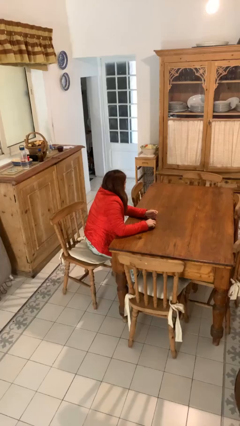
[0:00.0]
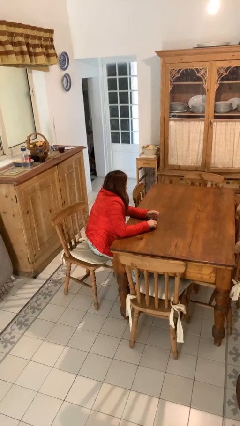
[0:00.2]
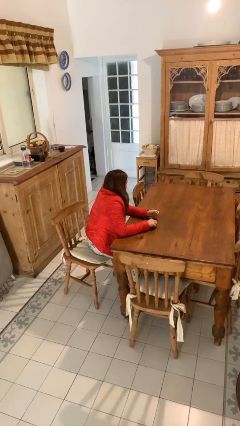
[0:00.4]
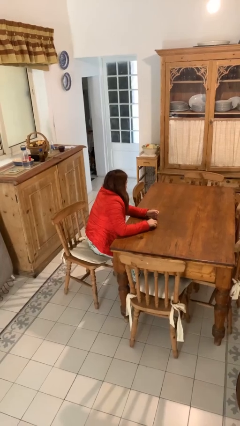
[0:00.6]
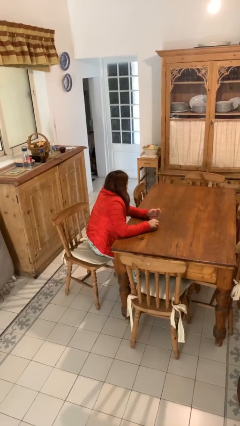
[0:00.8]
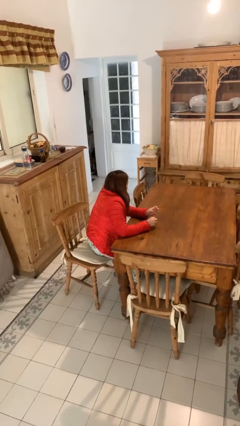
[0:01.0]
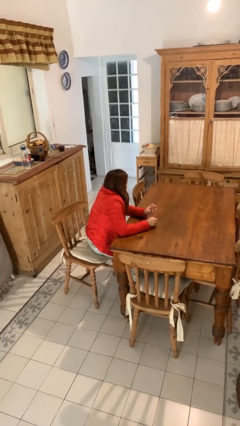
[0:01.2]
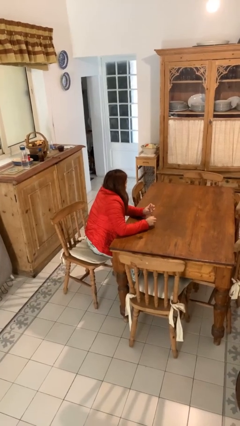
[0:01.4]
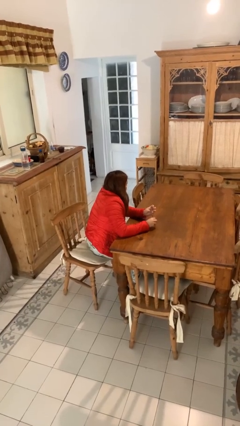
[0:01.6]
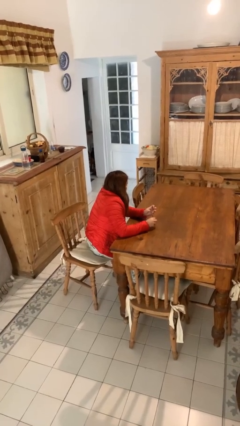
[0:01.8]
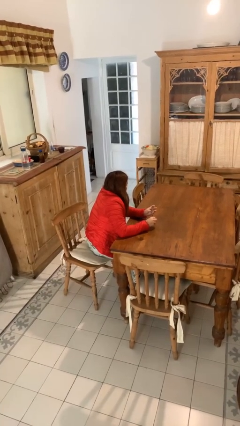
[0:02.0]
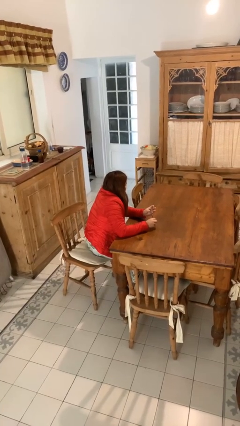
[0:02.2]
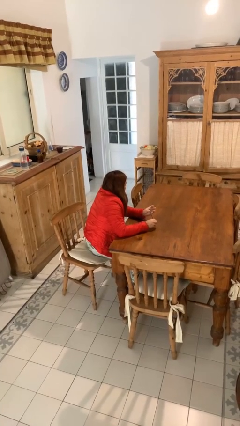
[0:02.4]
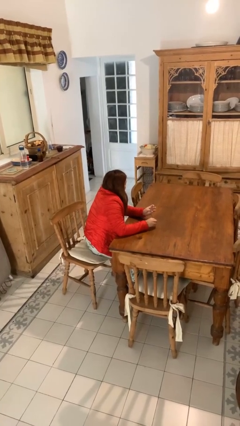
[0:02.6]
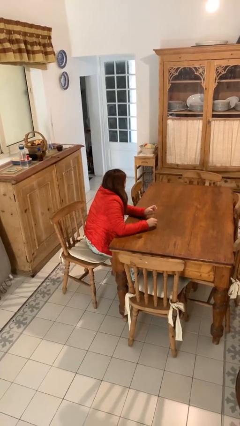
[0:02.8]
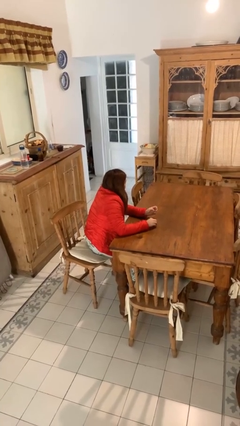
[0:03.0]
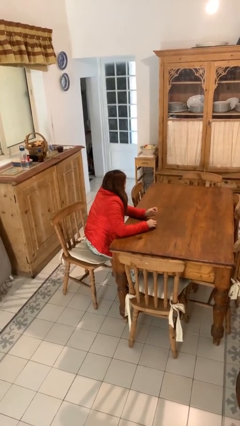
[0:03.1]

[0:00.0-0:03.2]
person files fingernails

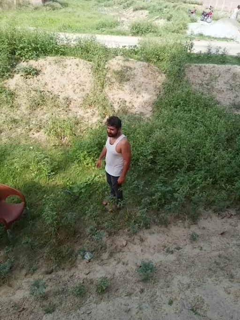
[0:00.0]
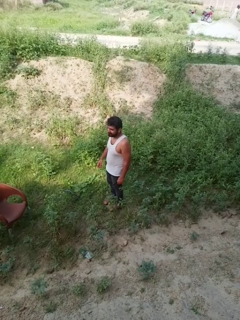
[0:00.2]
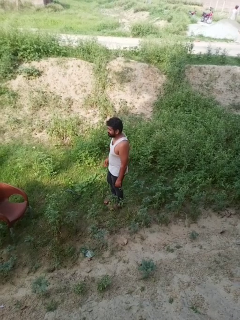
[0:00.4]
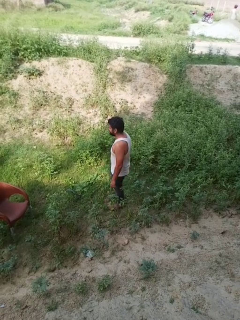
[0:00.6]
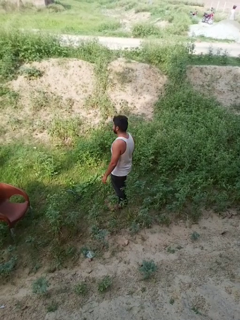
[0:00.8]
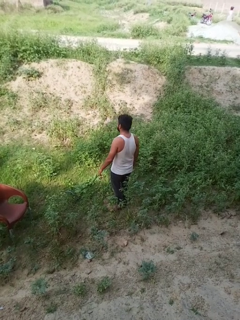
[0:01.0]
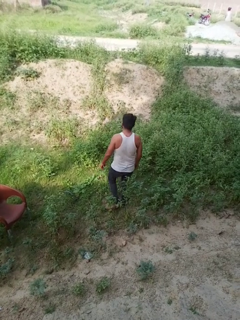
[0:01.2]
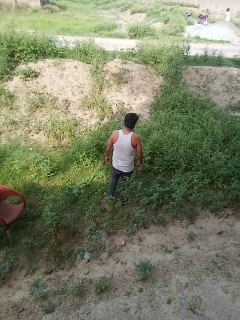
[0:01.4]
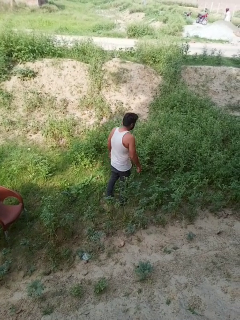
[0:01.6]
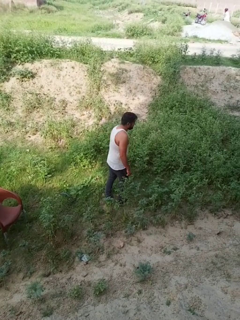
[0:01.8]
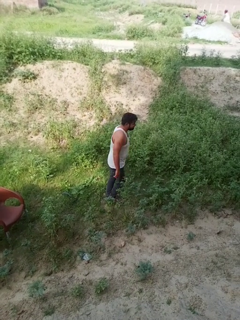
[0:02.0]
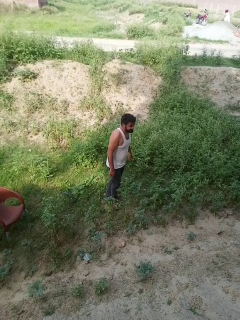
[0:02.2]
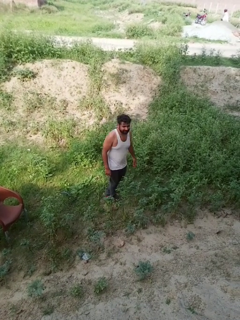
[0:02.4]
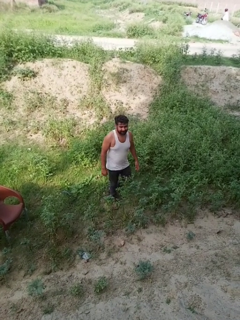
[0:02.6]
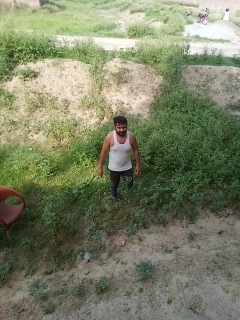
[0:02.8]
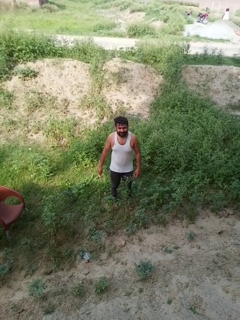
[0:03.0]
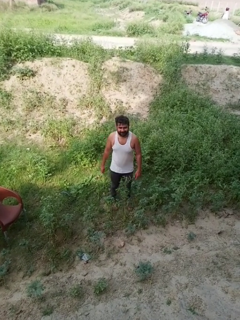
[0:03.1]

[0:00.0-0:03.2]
person twirls

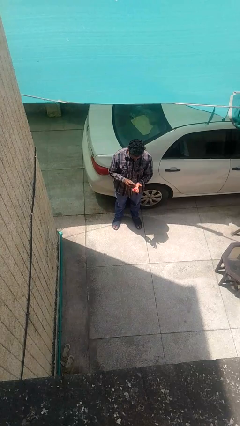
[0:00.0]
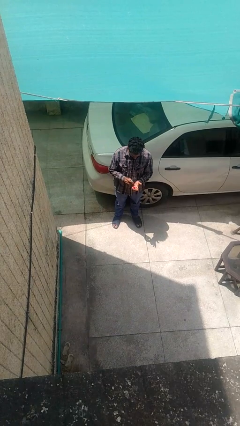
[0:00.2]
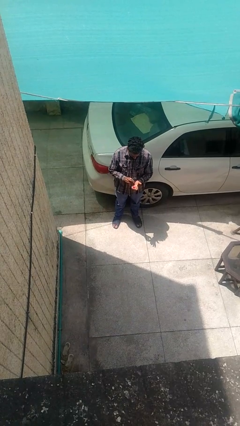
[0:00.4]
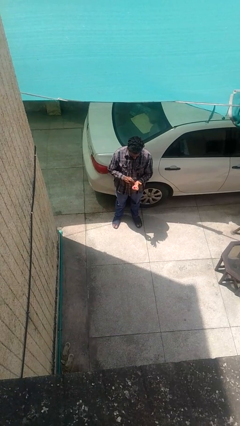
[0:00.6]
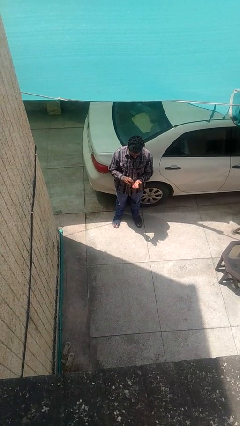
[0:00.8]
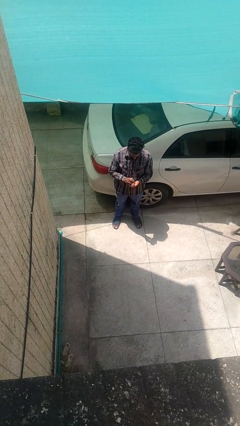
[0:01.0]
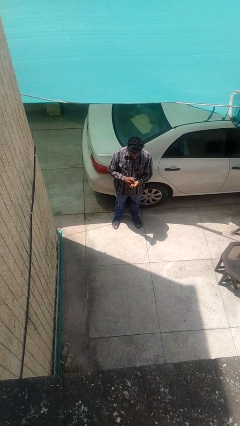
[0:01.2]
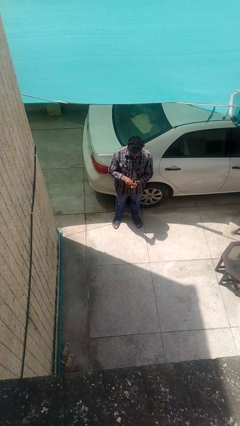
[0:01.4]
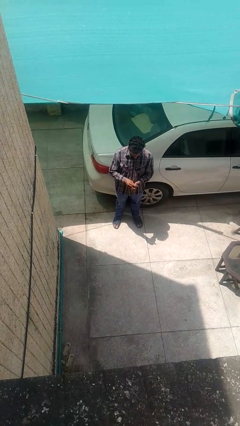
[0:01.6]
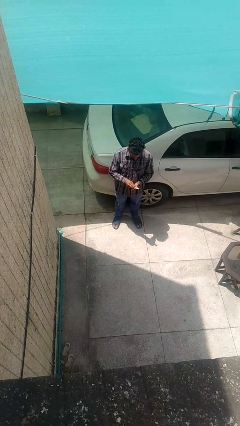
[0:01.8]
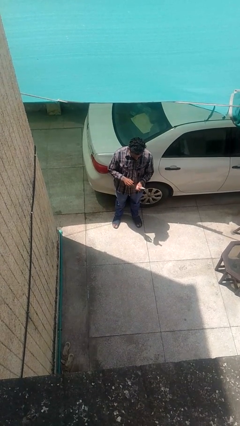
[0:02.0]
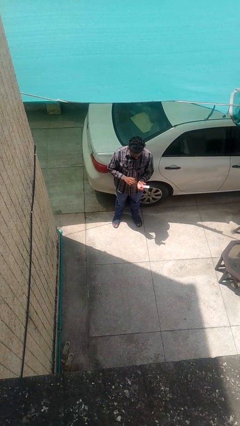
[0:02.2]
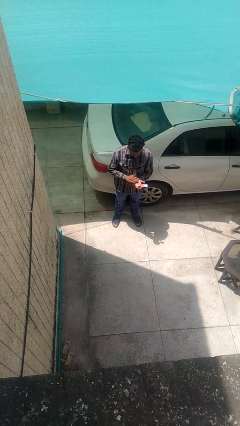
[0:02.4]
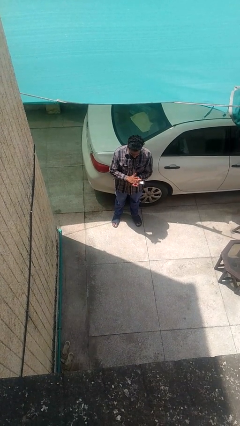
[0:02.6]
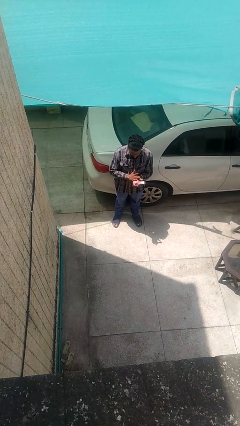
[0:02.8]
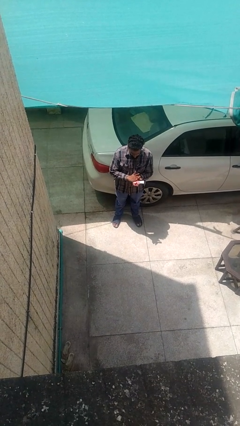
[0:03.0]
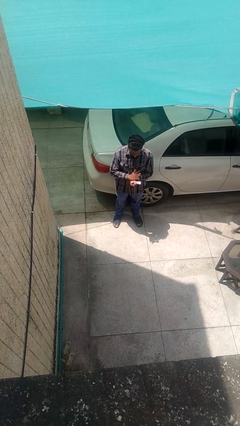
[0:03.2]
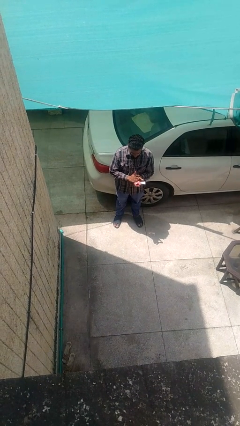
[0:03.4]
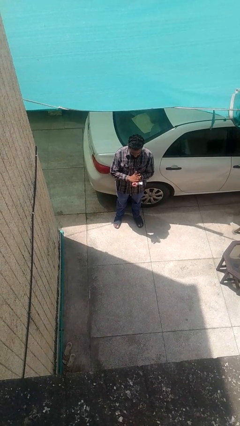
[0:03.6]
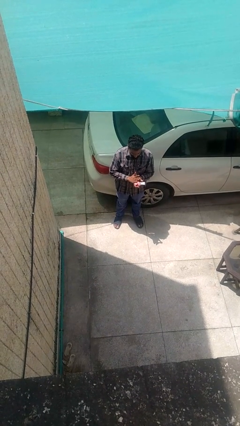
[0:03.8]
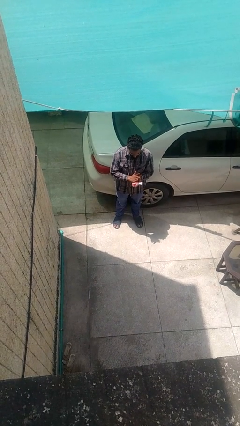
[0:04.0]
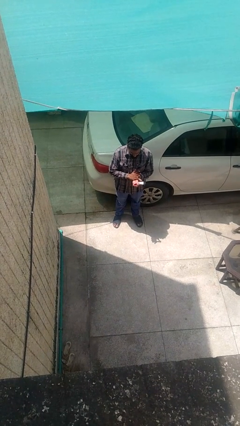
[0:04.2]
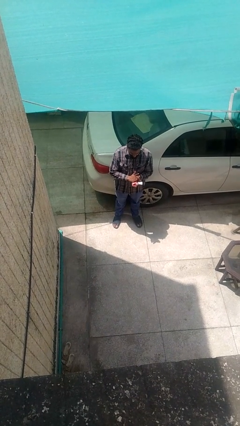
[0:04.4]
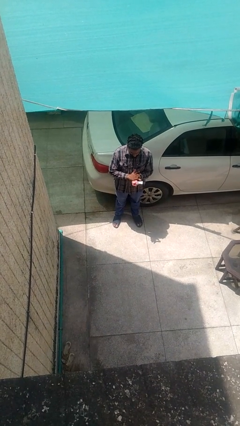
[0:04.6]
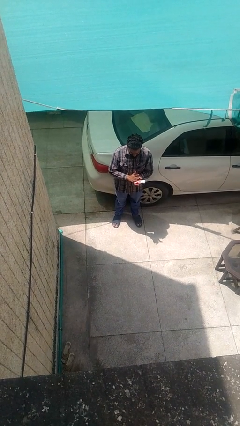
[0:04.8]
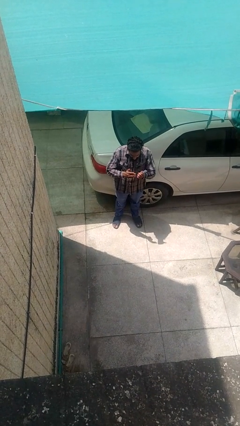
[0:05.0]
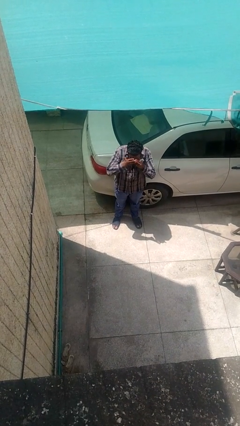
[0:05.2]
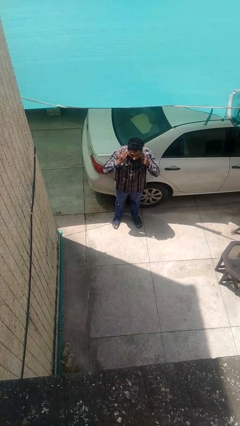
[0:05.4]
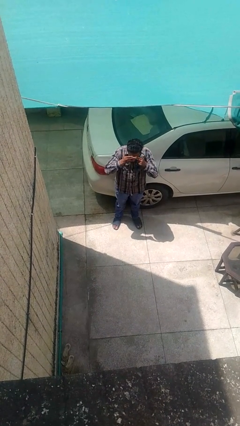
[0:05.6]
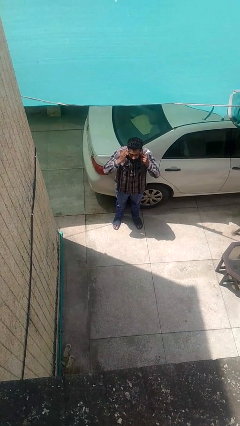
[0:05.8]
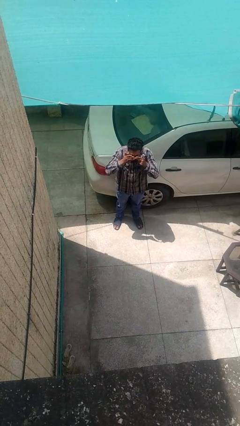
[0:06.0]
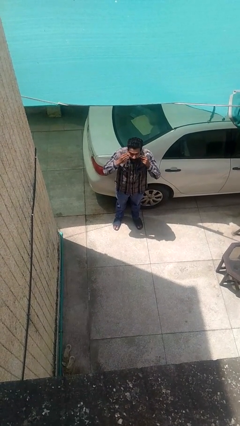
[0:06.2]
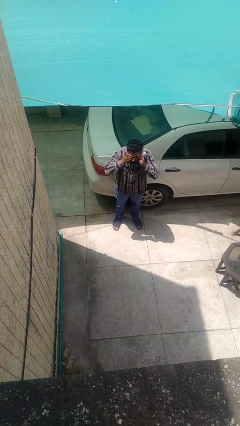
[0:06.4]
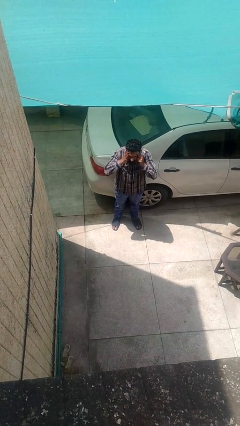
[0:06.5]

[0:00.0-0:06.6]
person applies facial moisturizer

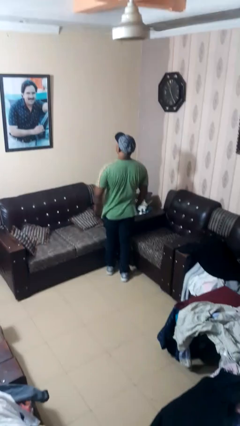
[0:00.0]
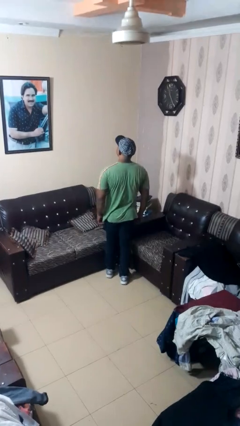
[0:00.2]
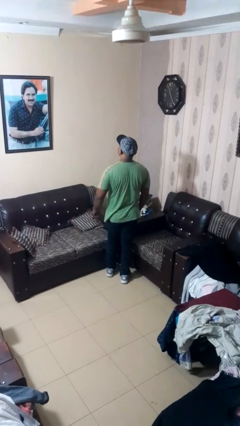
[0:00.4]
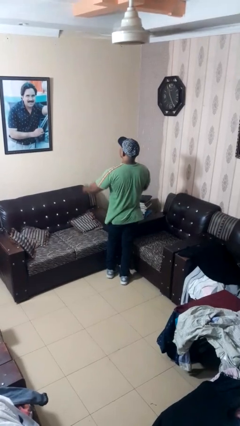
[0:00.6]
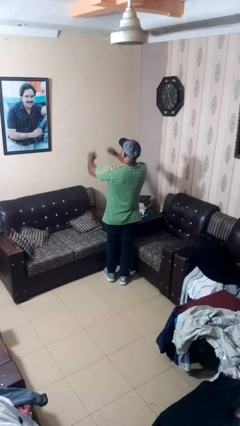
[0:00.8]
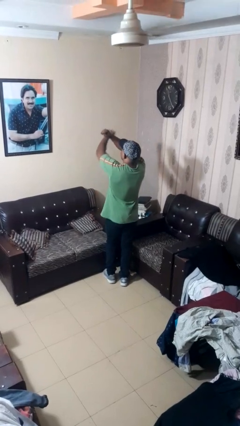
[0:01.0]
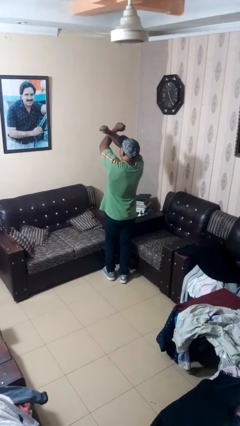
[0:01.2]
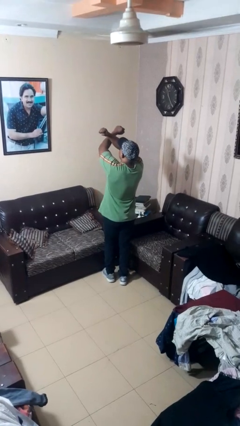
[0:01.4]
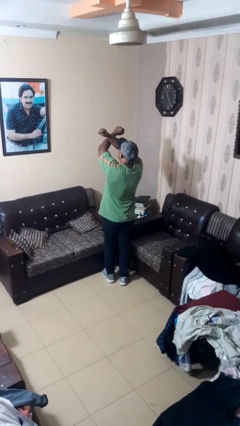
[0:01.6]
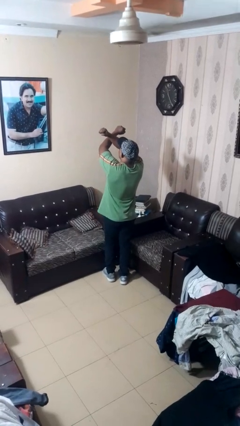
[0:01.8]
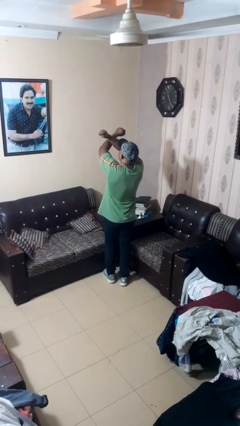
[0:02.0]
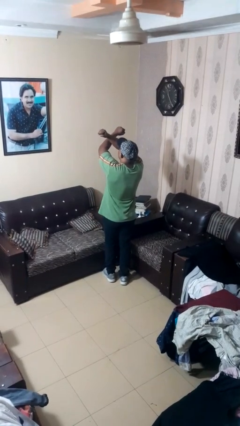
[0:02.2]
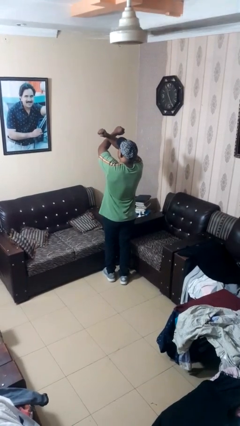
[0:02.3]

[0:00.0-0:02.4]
person gestures arms x

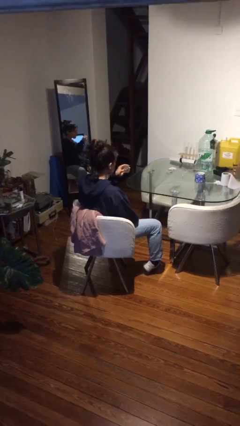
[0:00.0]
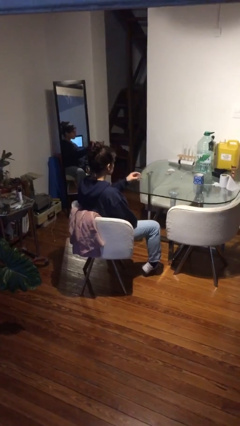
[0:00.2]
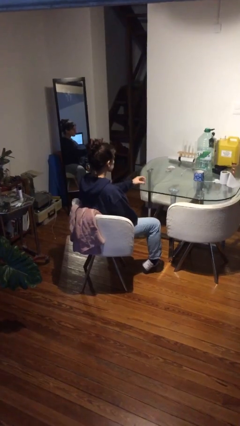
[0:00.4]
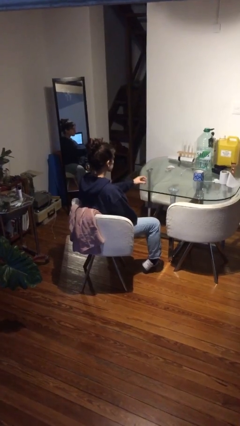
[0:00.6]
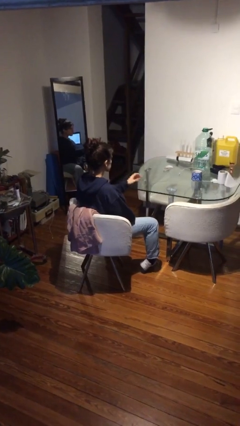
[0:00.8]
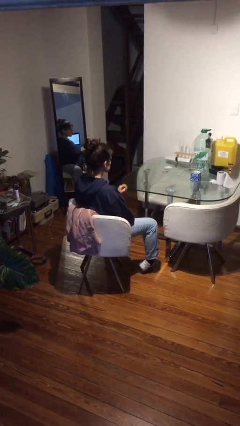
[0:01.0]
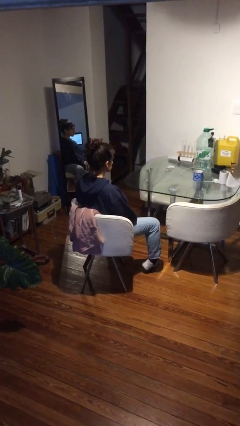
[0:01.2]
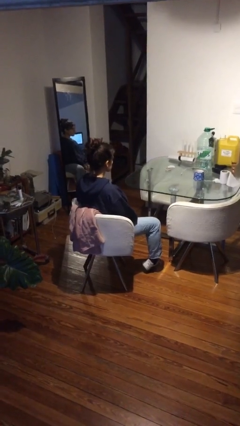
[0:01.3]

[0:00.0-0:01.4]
person puts down object on table

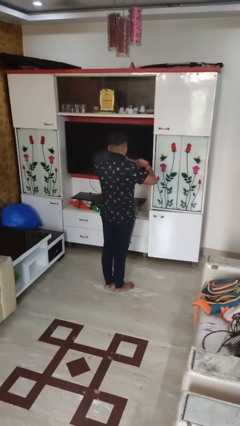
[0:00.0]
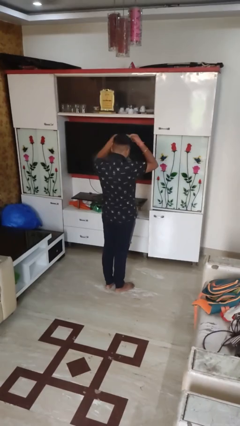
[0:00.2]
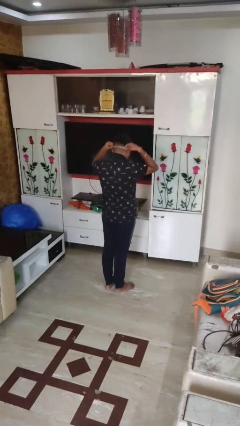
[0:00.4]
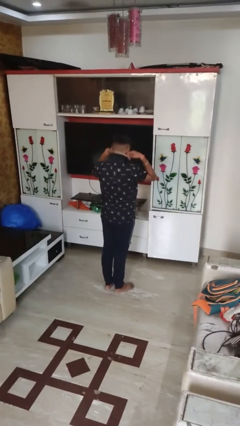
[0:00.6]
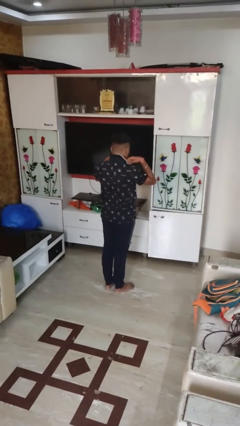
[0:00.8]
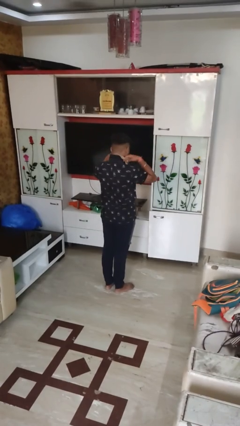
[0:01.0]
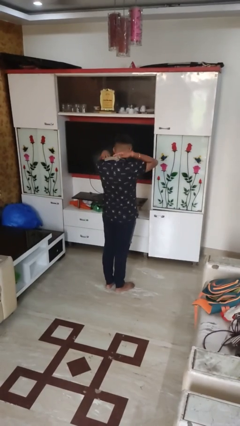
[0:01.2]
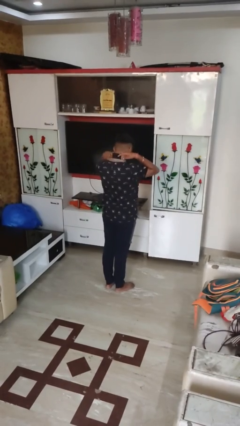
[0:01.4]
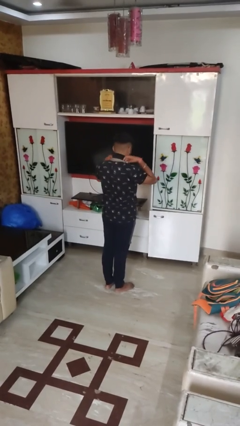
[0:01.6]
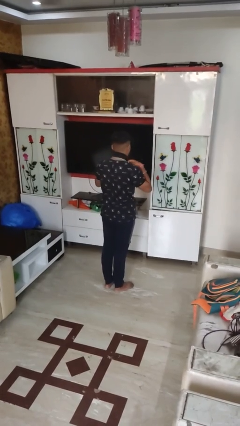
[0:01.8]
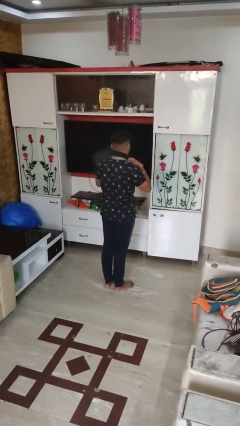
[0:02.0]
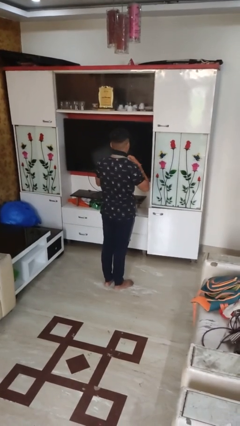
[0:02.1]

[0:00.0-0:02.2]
person puts on necktie
